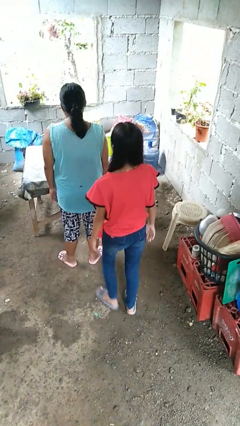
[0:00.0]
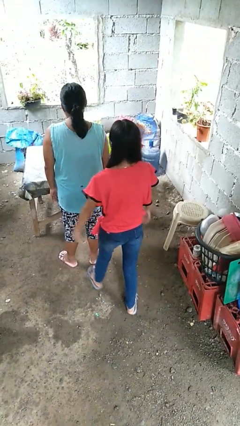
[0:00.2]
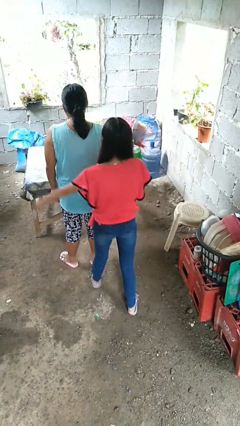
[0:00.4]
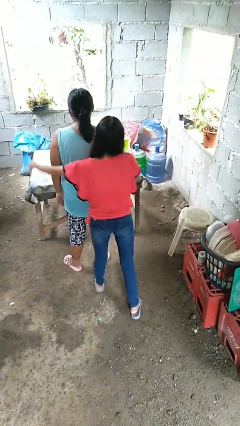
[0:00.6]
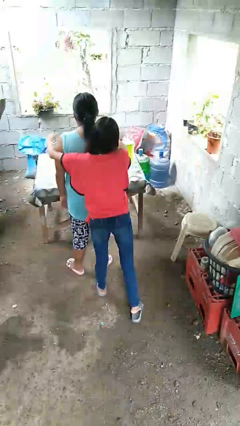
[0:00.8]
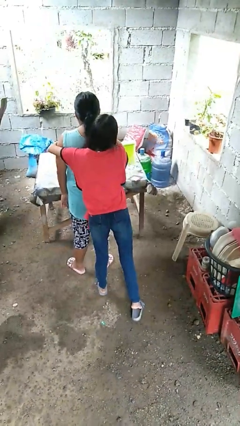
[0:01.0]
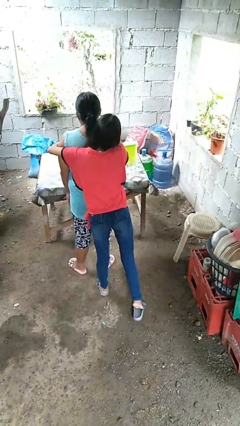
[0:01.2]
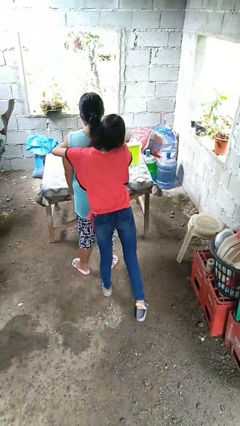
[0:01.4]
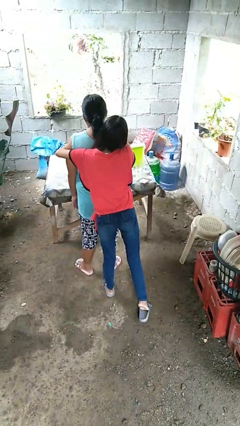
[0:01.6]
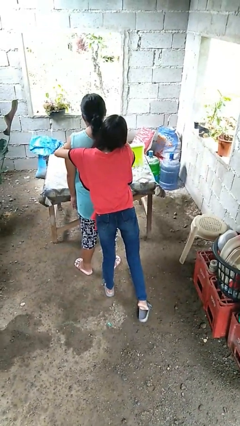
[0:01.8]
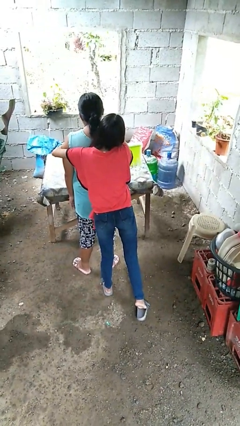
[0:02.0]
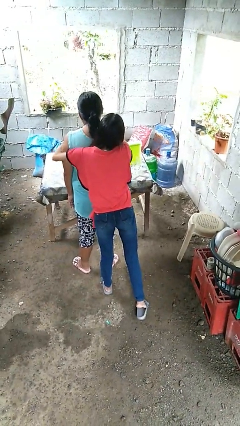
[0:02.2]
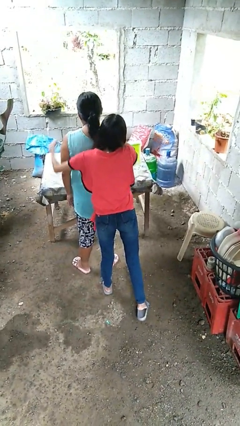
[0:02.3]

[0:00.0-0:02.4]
person hugs person from behind

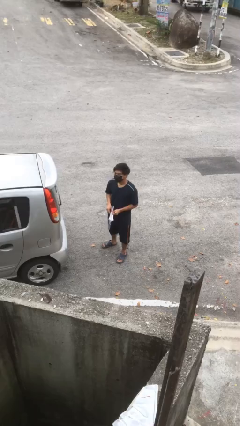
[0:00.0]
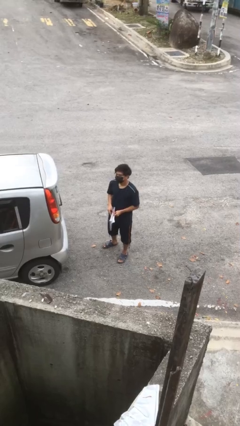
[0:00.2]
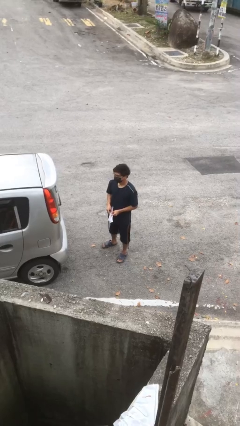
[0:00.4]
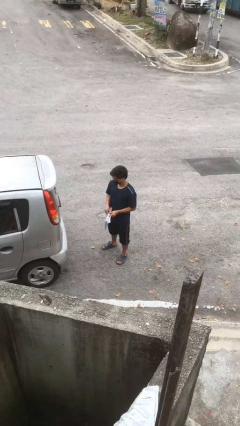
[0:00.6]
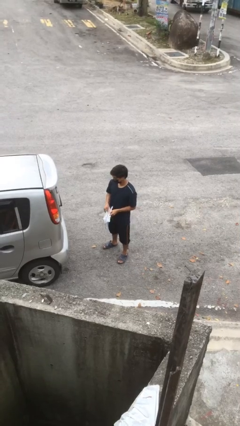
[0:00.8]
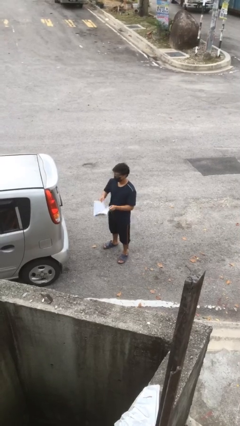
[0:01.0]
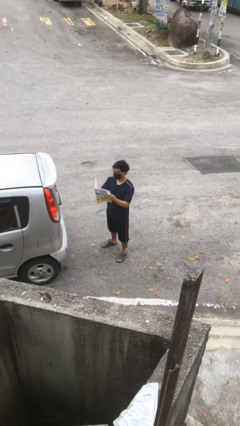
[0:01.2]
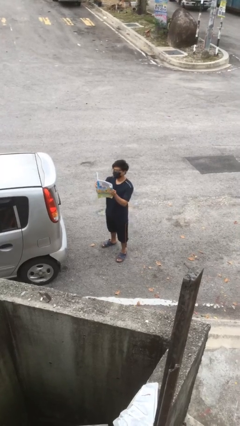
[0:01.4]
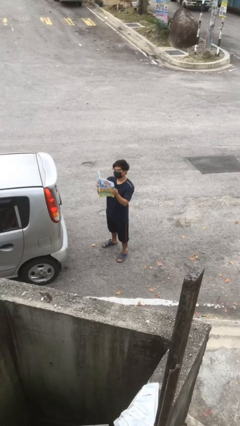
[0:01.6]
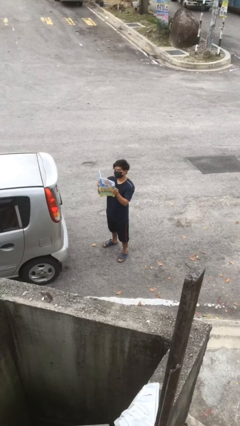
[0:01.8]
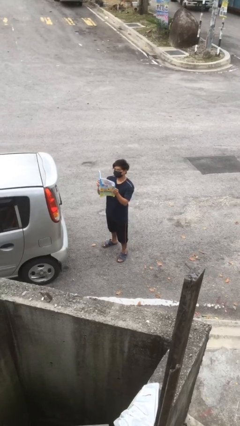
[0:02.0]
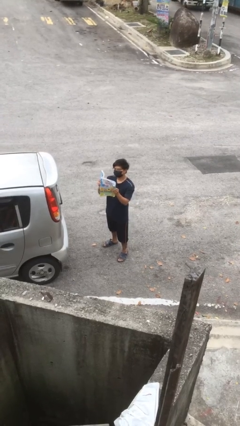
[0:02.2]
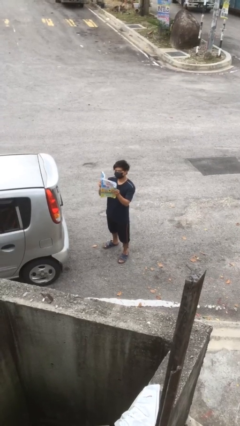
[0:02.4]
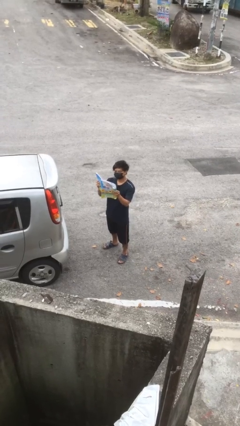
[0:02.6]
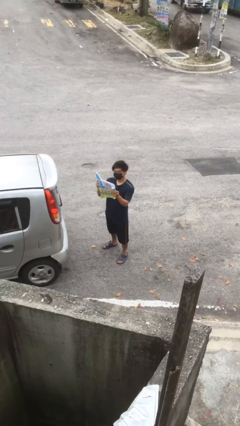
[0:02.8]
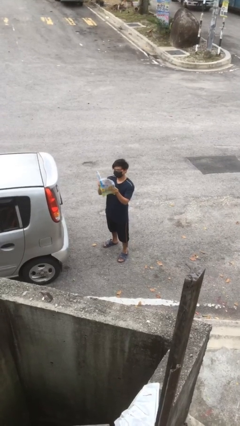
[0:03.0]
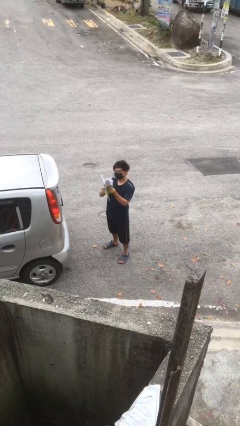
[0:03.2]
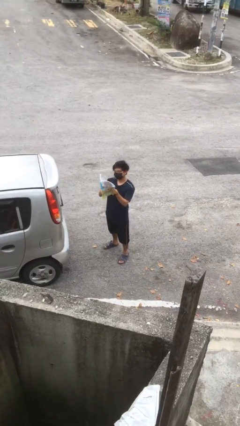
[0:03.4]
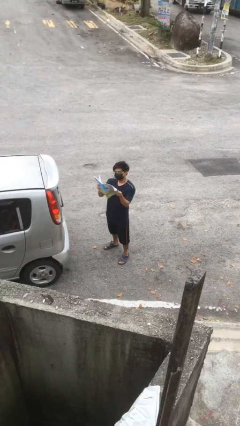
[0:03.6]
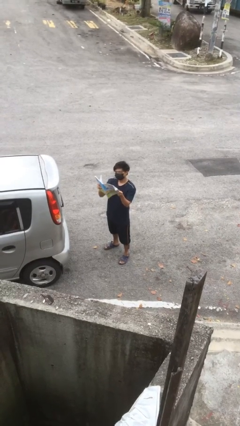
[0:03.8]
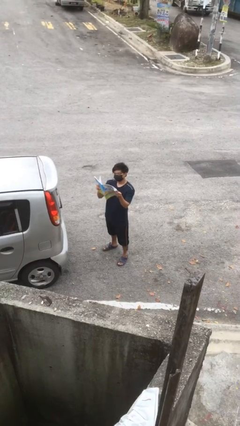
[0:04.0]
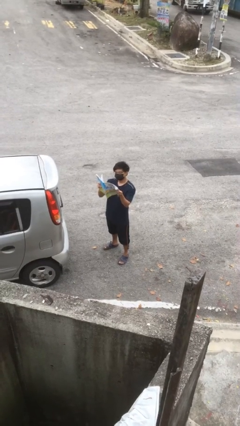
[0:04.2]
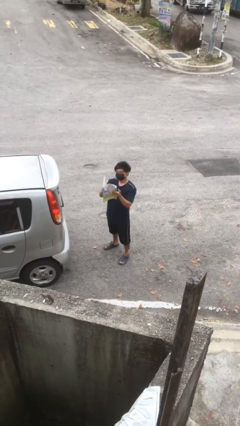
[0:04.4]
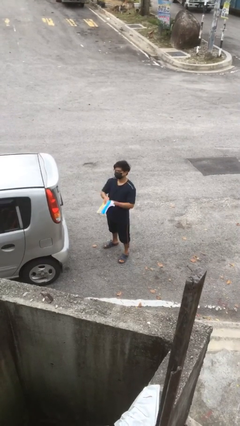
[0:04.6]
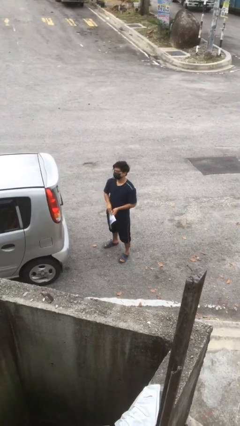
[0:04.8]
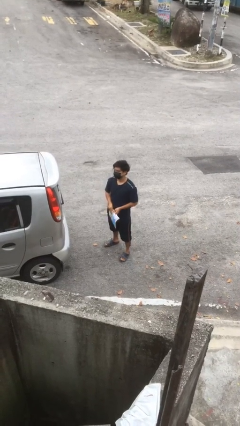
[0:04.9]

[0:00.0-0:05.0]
person reads document

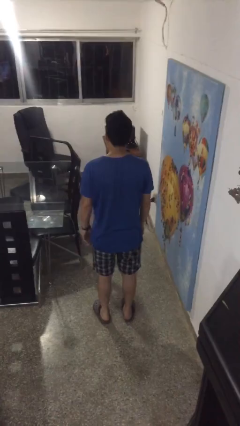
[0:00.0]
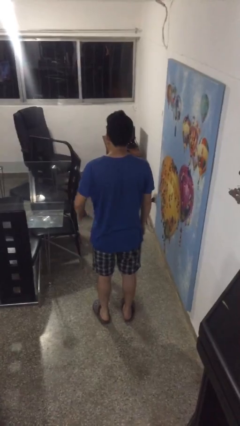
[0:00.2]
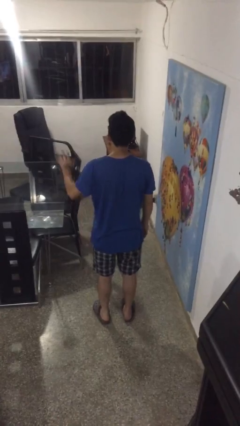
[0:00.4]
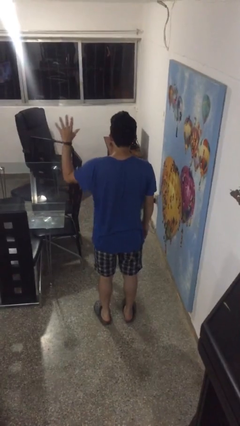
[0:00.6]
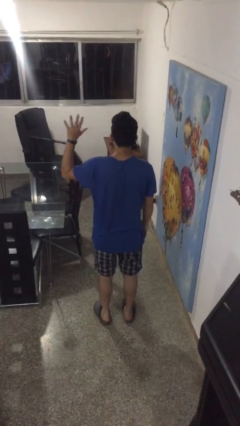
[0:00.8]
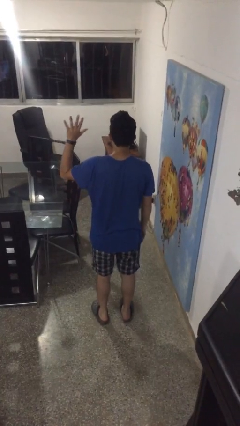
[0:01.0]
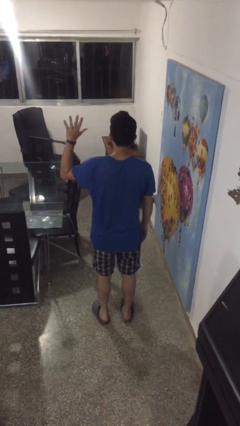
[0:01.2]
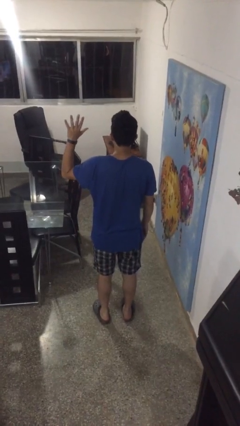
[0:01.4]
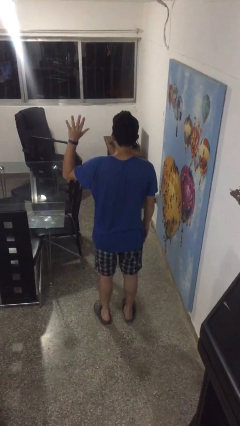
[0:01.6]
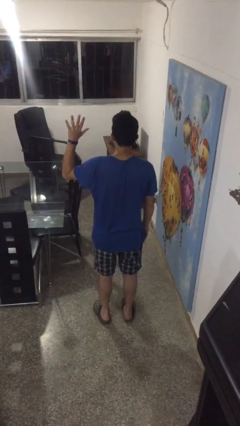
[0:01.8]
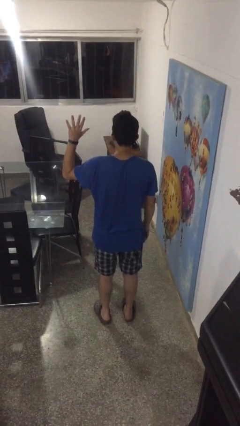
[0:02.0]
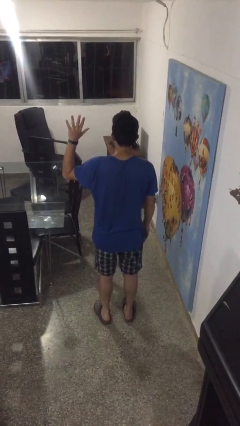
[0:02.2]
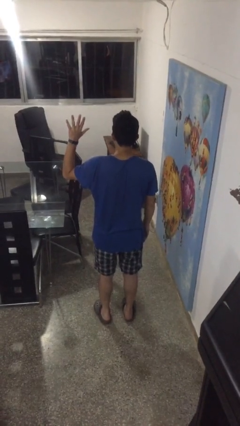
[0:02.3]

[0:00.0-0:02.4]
person gestures number five

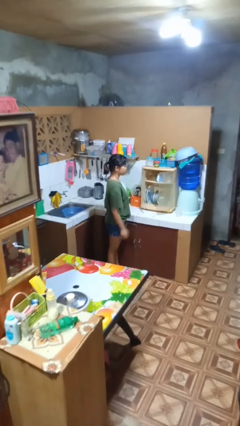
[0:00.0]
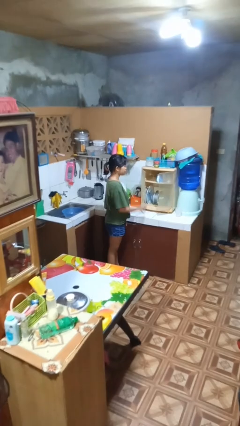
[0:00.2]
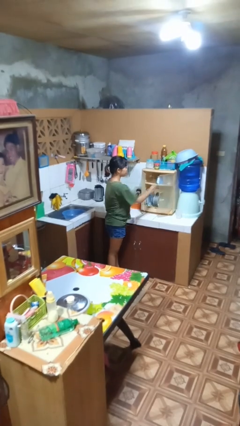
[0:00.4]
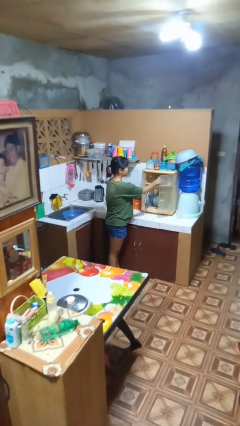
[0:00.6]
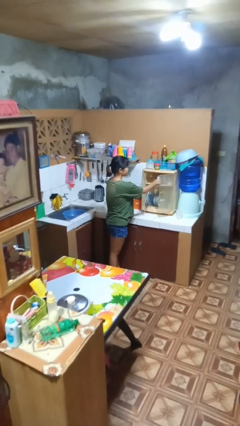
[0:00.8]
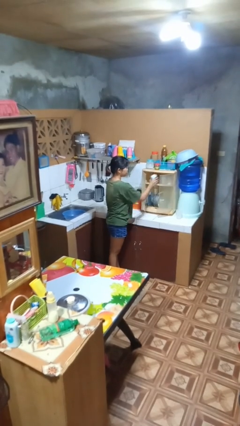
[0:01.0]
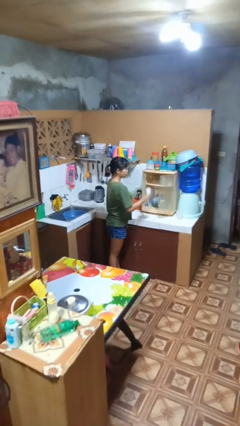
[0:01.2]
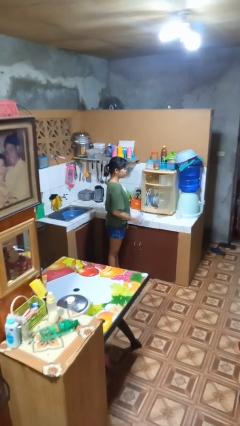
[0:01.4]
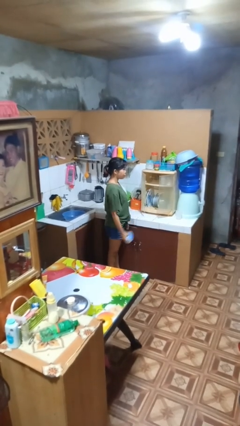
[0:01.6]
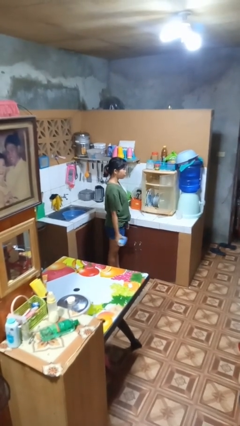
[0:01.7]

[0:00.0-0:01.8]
person takes object from cabinet

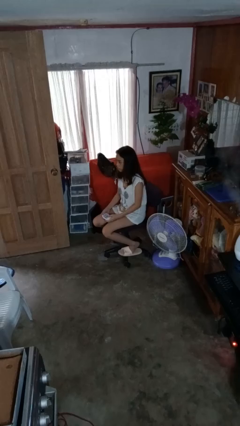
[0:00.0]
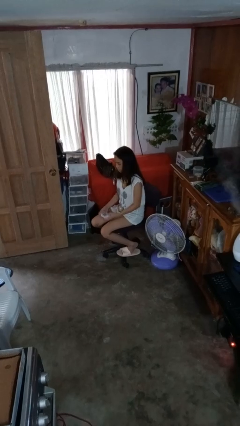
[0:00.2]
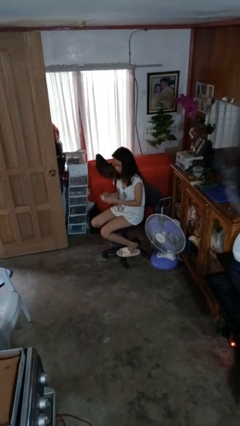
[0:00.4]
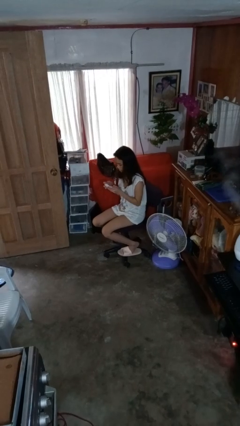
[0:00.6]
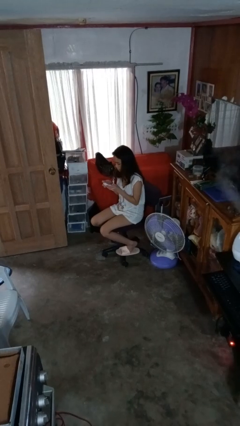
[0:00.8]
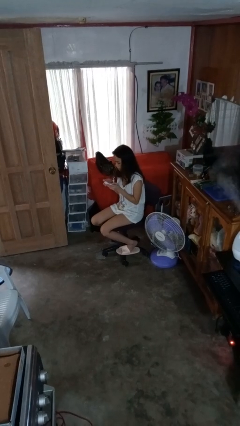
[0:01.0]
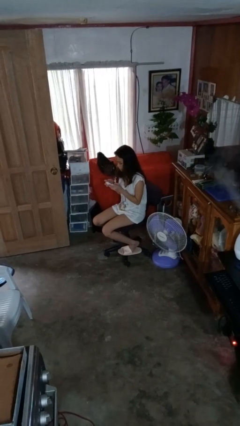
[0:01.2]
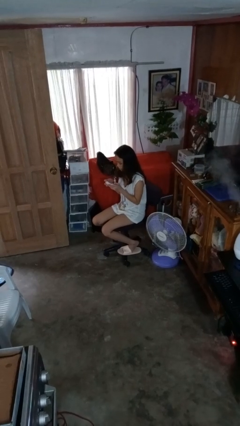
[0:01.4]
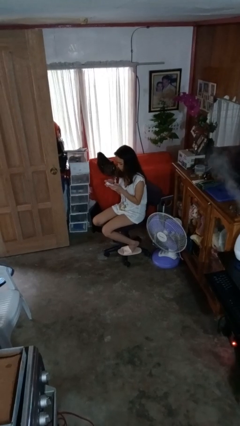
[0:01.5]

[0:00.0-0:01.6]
person interacts with handheld game

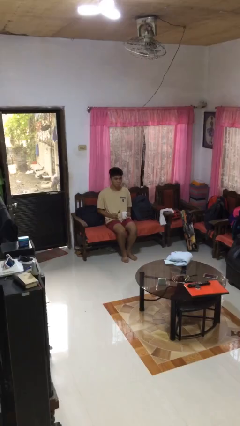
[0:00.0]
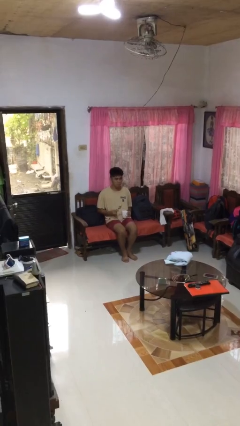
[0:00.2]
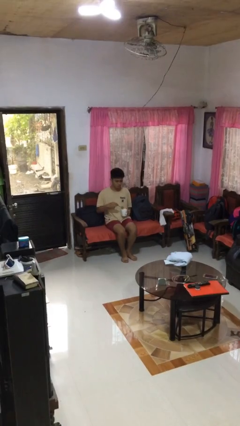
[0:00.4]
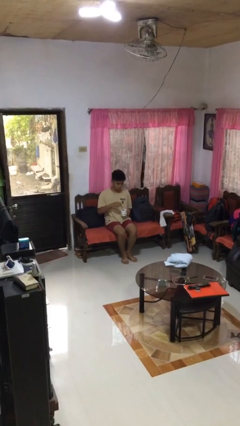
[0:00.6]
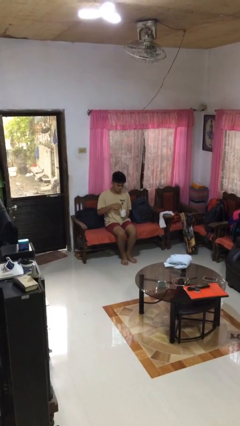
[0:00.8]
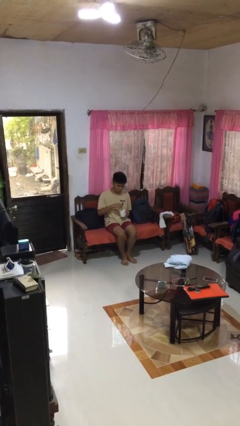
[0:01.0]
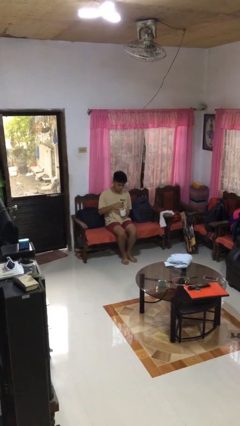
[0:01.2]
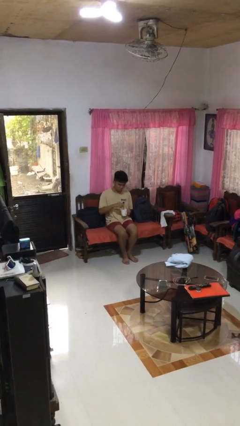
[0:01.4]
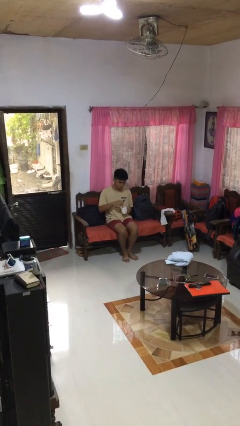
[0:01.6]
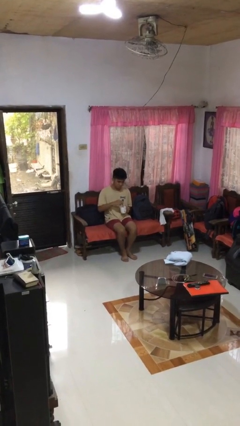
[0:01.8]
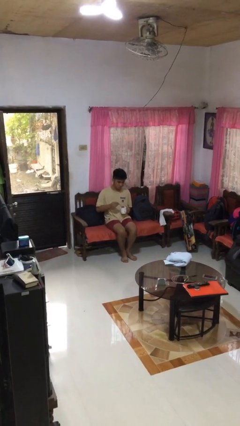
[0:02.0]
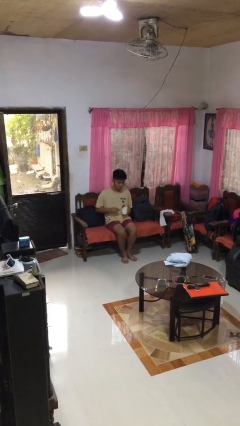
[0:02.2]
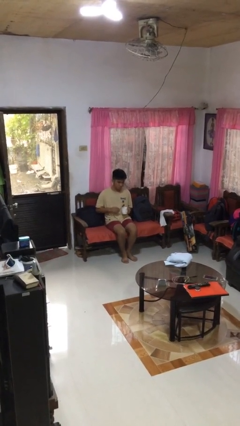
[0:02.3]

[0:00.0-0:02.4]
person stirs mug

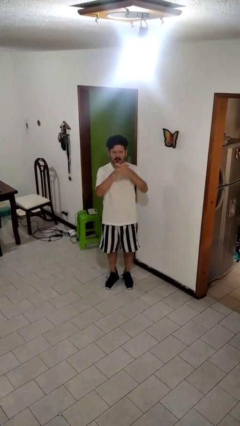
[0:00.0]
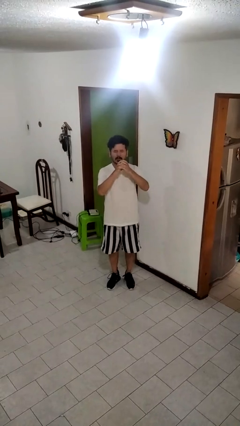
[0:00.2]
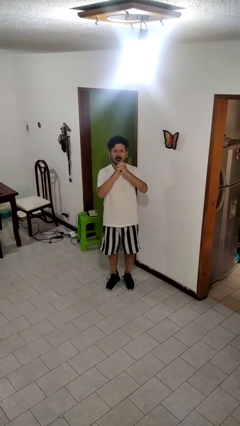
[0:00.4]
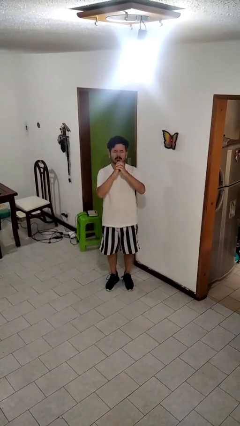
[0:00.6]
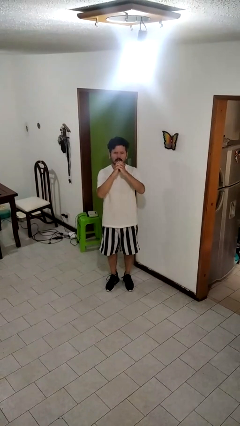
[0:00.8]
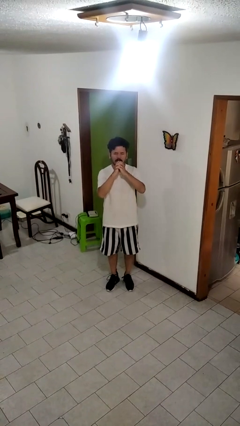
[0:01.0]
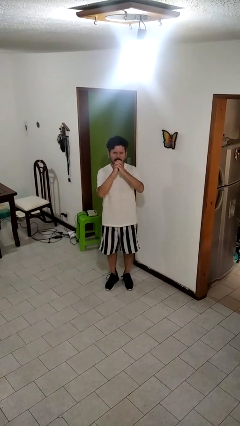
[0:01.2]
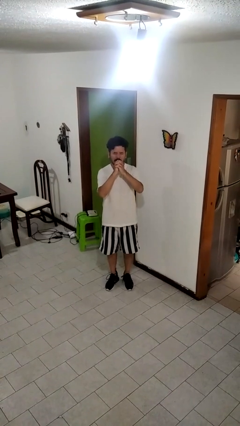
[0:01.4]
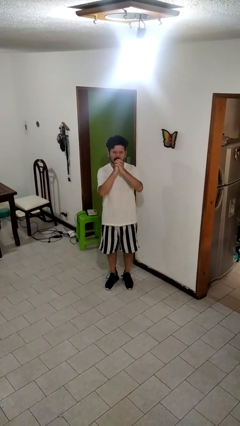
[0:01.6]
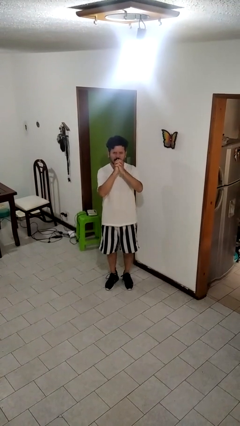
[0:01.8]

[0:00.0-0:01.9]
person prays
